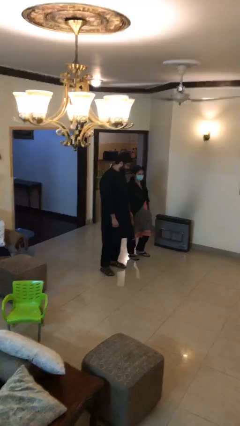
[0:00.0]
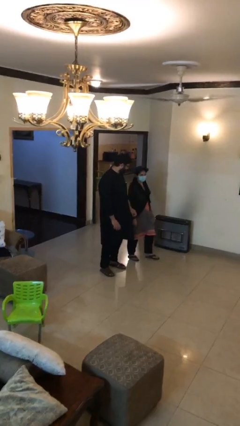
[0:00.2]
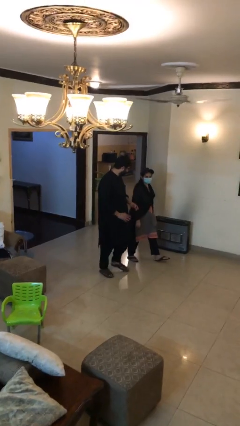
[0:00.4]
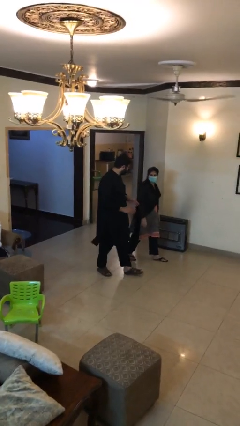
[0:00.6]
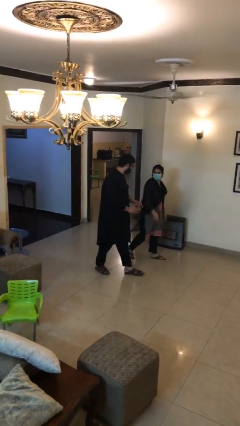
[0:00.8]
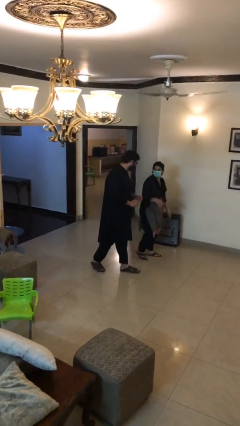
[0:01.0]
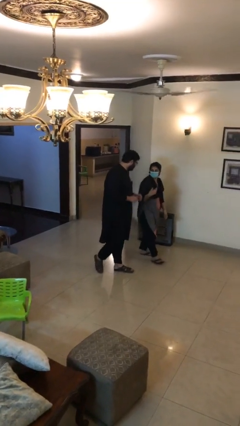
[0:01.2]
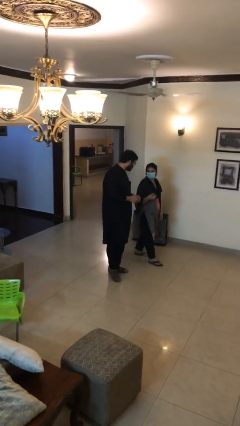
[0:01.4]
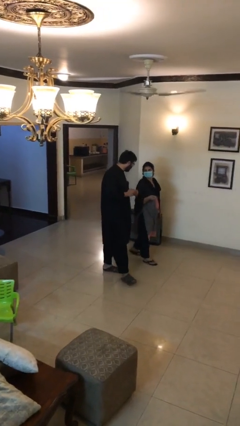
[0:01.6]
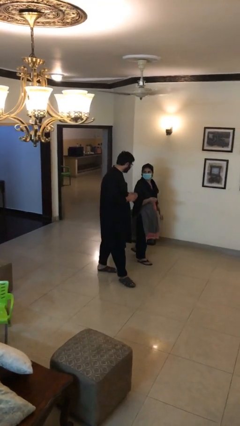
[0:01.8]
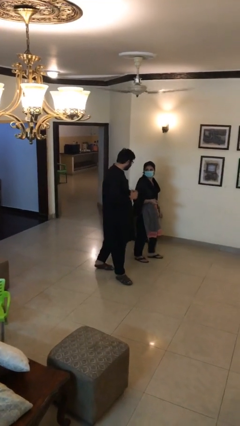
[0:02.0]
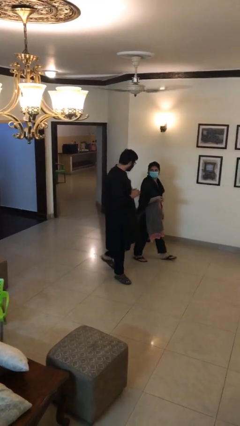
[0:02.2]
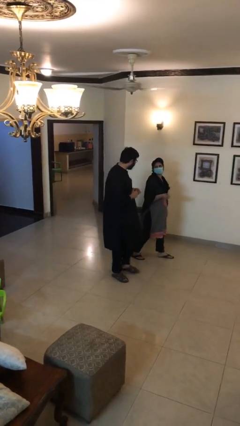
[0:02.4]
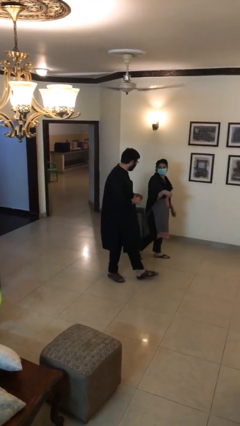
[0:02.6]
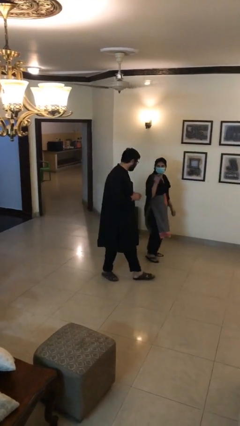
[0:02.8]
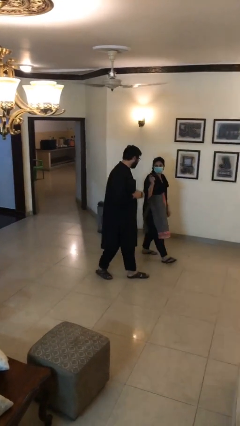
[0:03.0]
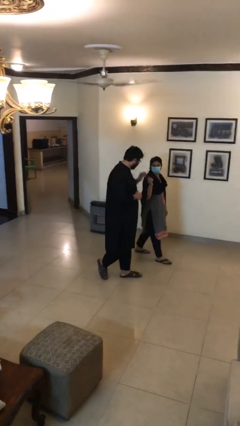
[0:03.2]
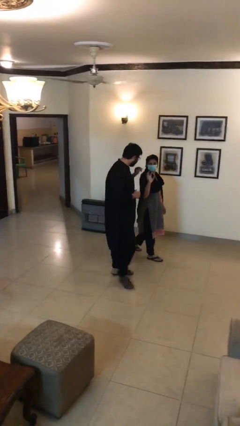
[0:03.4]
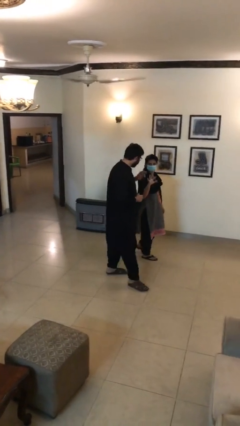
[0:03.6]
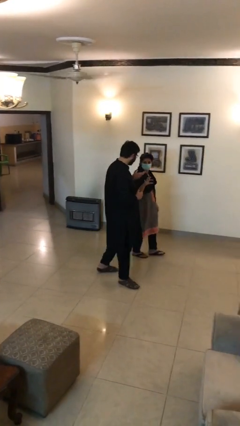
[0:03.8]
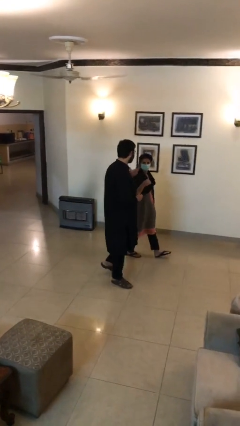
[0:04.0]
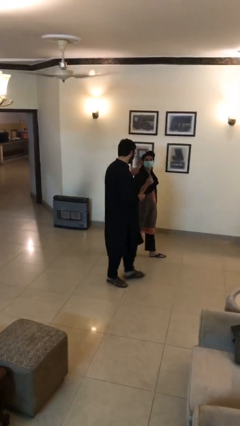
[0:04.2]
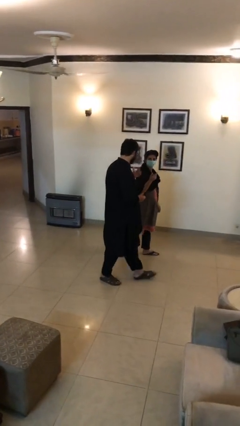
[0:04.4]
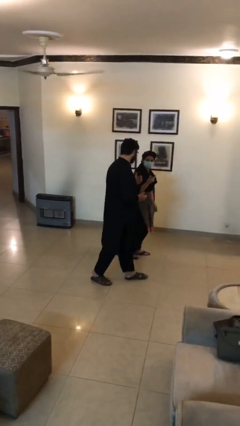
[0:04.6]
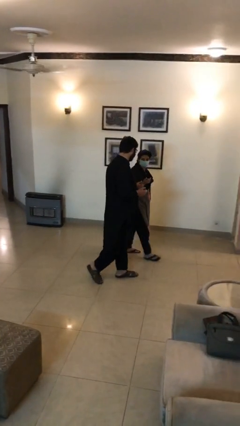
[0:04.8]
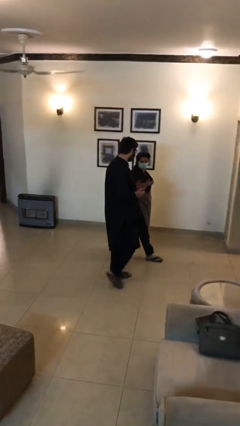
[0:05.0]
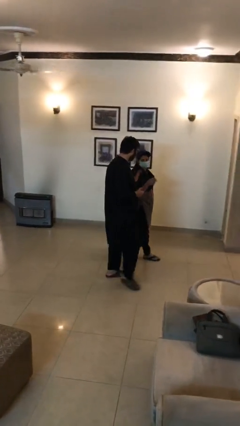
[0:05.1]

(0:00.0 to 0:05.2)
person talks to person

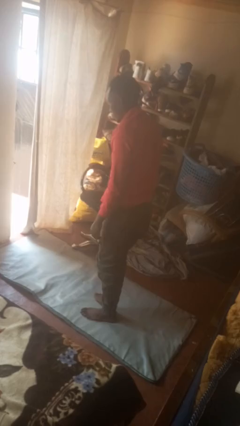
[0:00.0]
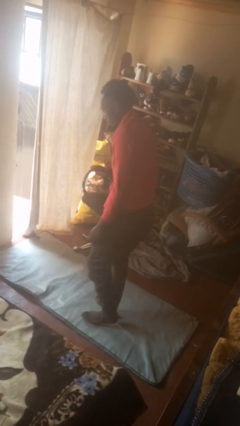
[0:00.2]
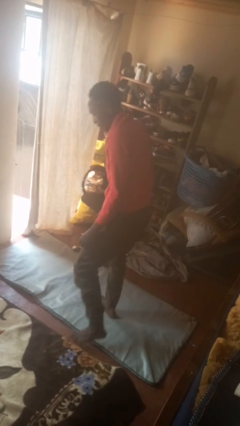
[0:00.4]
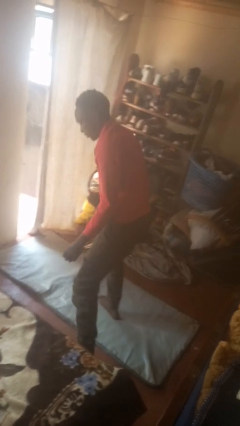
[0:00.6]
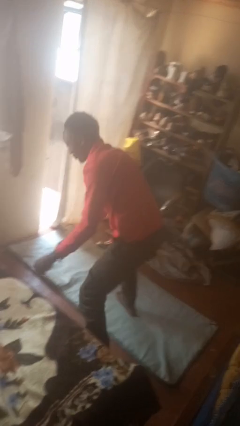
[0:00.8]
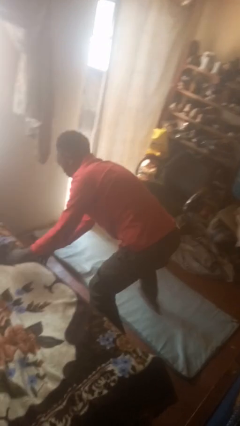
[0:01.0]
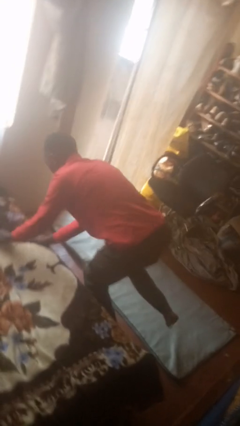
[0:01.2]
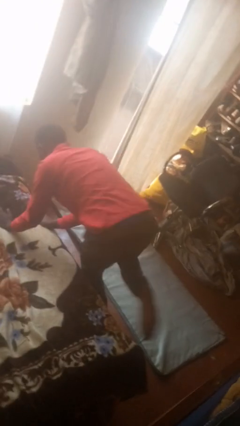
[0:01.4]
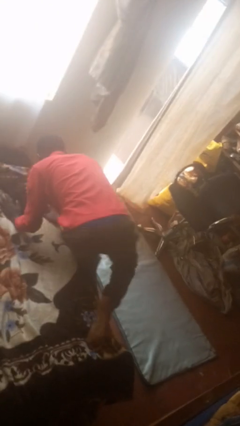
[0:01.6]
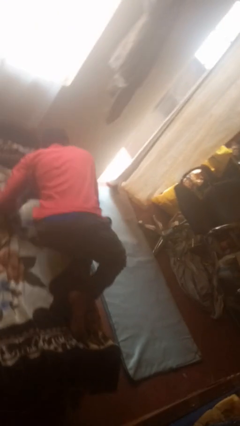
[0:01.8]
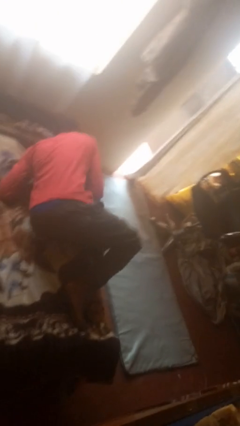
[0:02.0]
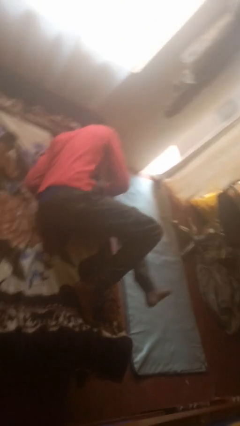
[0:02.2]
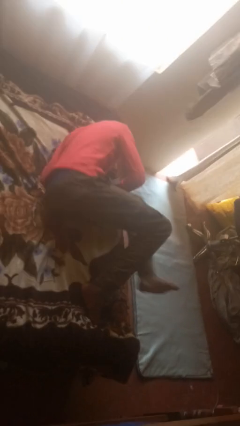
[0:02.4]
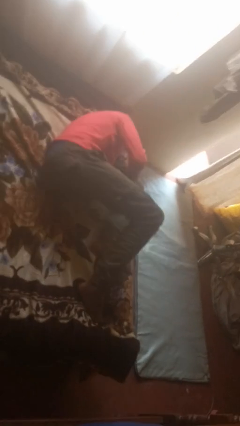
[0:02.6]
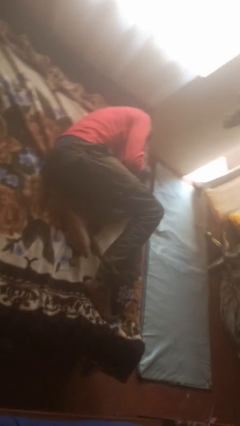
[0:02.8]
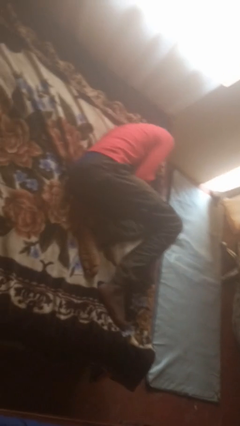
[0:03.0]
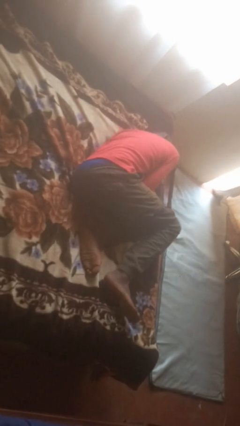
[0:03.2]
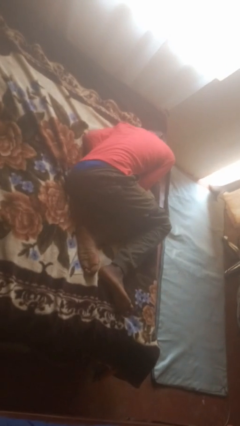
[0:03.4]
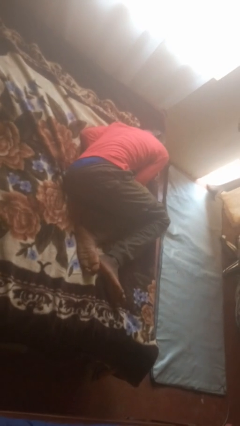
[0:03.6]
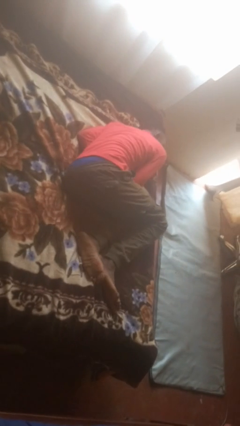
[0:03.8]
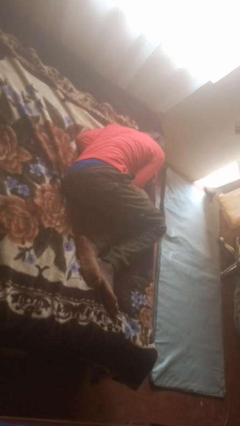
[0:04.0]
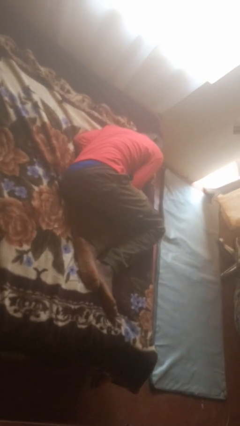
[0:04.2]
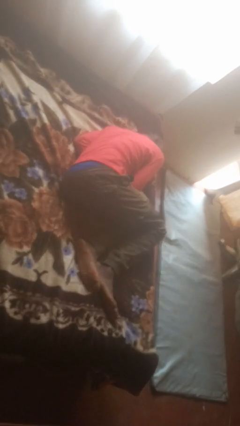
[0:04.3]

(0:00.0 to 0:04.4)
person lies down on bed

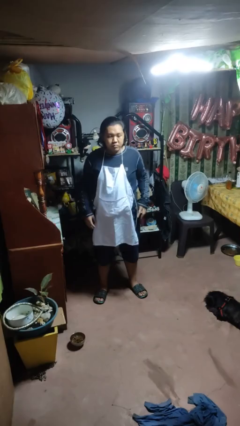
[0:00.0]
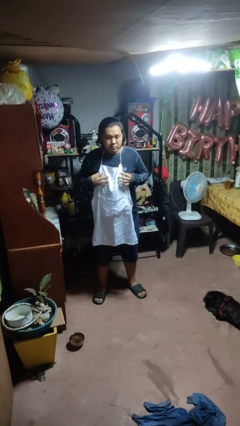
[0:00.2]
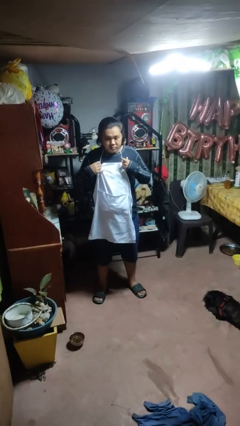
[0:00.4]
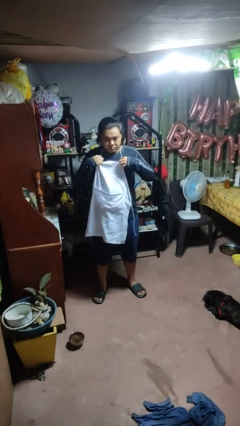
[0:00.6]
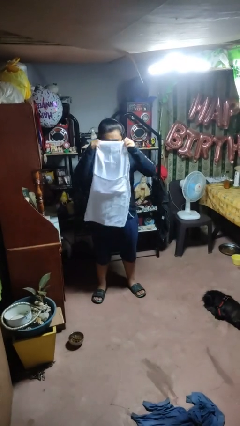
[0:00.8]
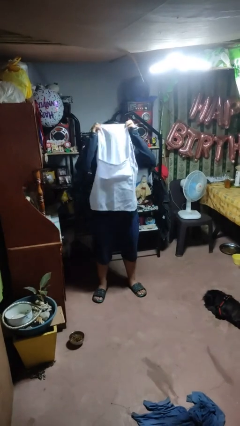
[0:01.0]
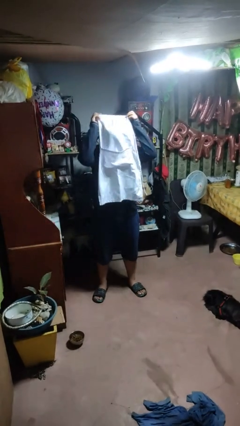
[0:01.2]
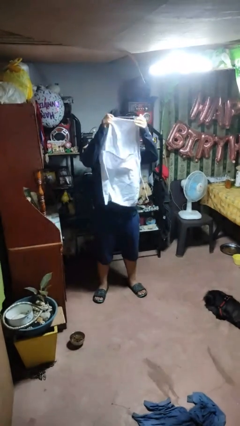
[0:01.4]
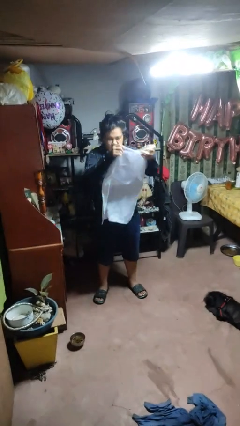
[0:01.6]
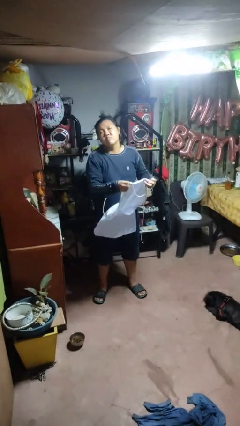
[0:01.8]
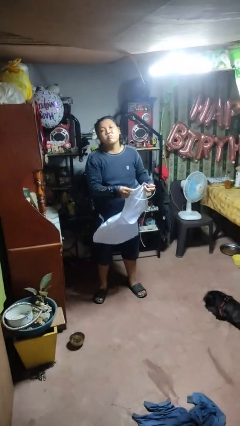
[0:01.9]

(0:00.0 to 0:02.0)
person takes off apron

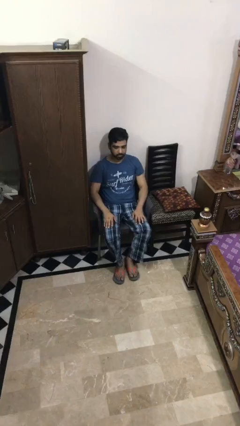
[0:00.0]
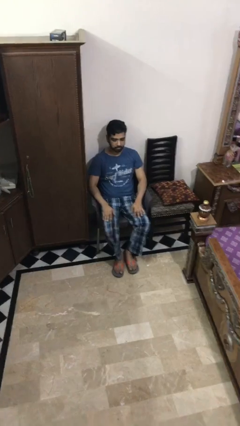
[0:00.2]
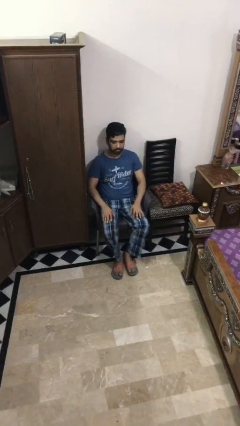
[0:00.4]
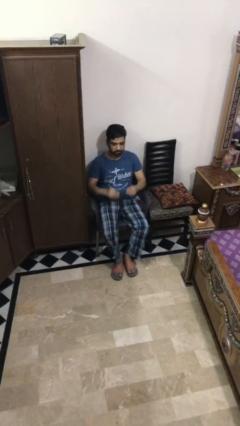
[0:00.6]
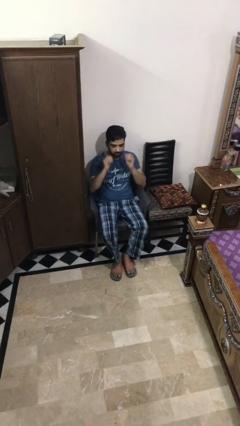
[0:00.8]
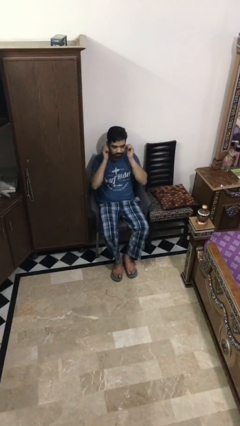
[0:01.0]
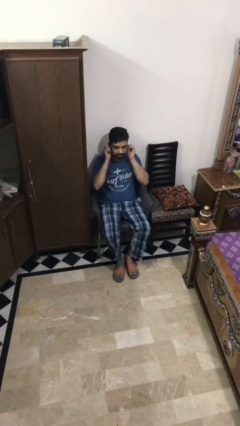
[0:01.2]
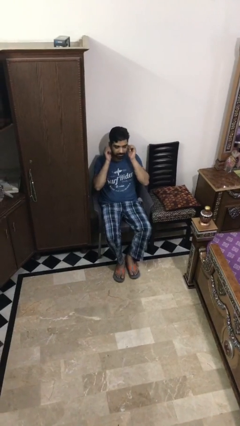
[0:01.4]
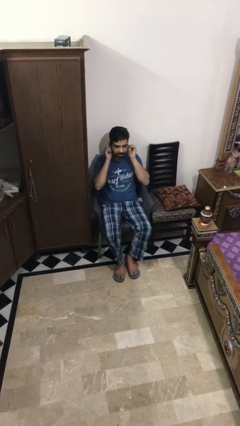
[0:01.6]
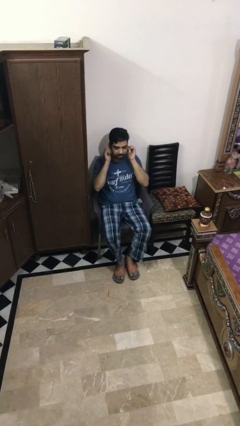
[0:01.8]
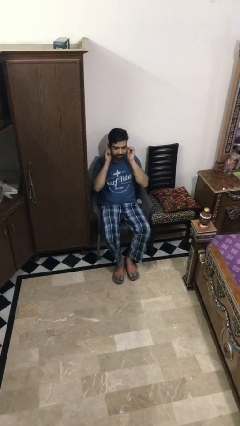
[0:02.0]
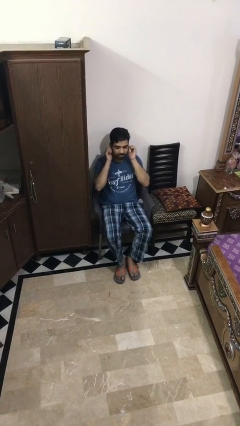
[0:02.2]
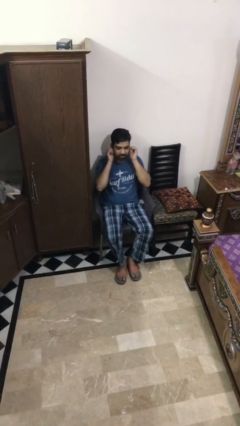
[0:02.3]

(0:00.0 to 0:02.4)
person touches earlobe

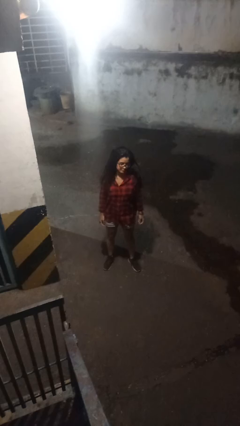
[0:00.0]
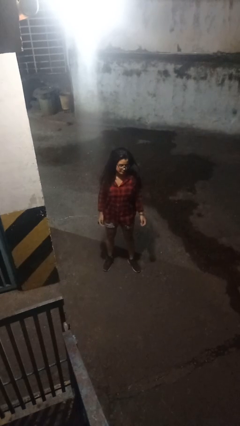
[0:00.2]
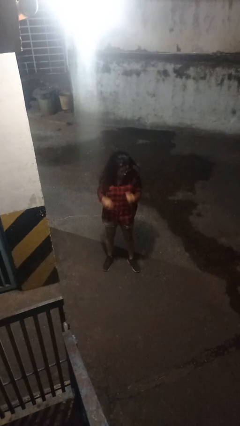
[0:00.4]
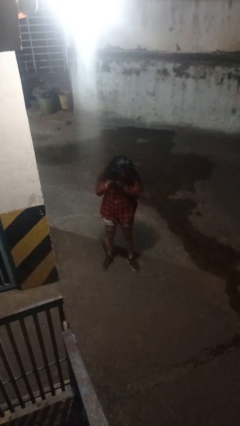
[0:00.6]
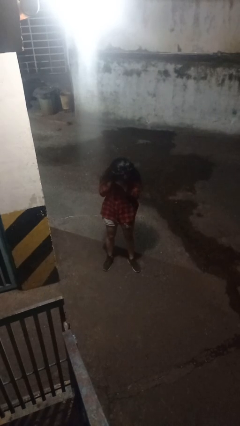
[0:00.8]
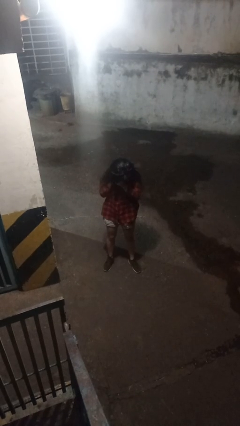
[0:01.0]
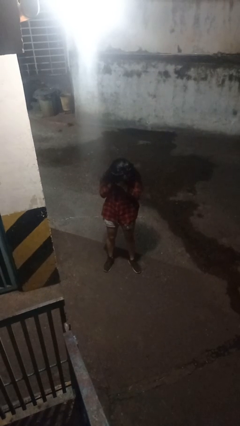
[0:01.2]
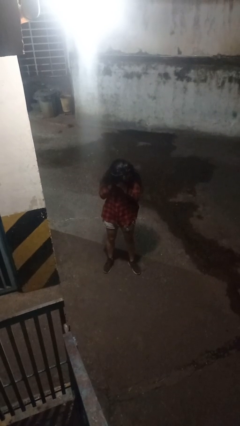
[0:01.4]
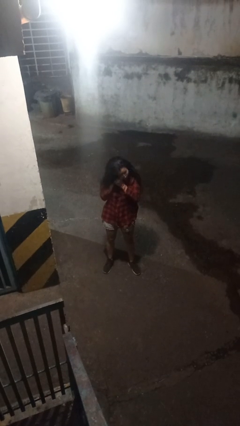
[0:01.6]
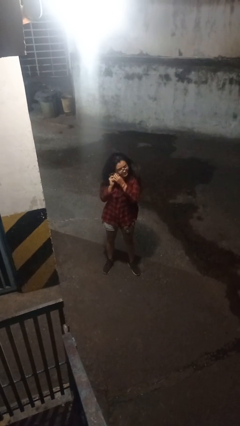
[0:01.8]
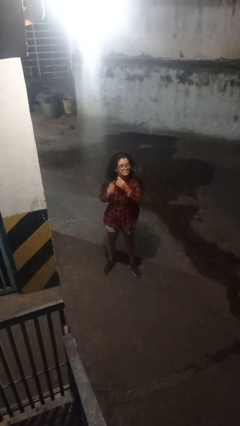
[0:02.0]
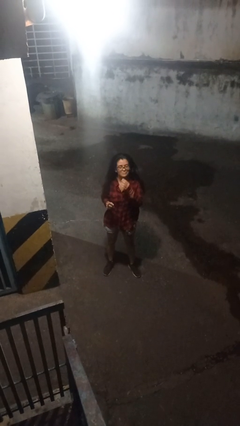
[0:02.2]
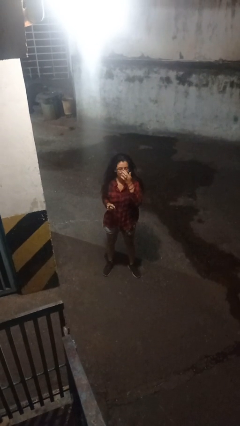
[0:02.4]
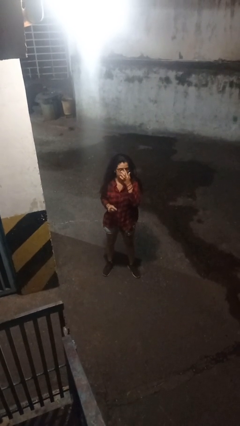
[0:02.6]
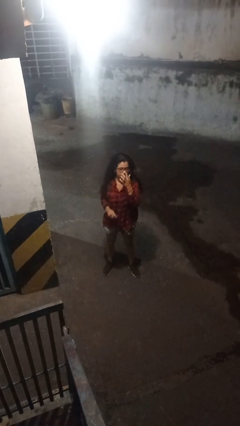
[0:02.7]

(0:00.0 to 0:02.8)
person puts on earrings

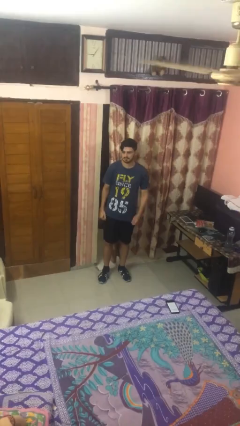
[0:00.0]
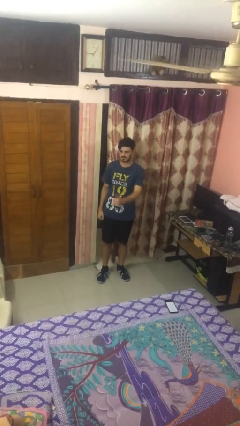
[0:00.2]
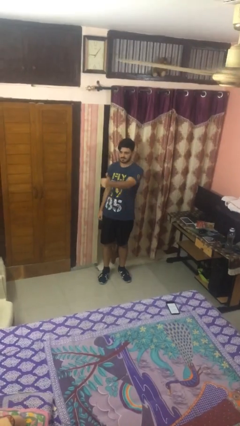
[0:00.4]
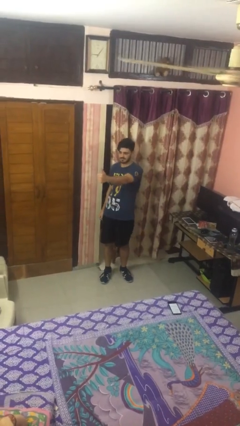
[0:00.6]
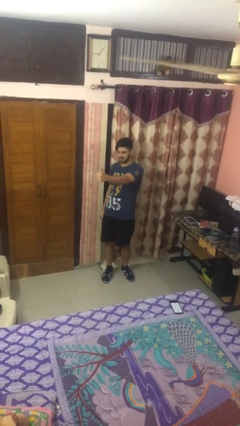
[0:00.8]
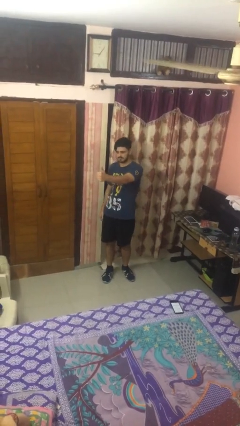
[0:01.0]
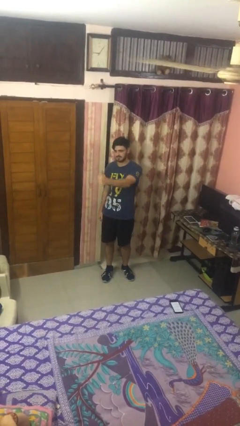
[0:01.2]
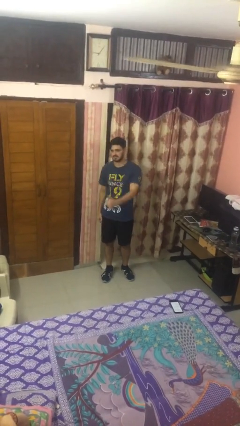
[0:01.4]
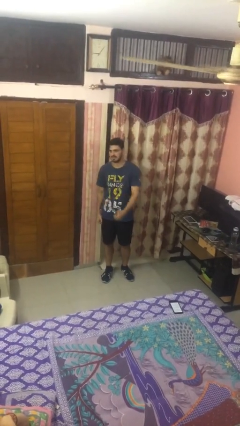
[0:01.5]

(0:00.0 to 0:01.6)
person gestures thumbs up
